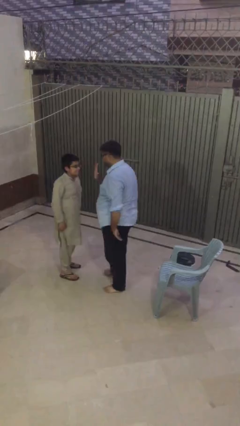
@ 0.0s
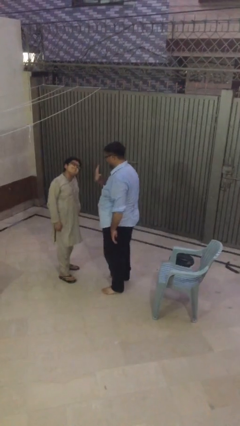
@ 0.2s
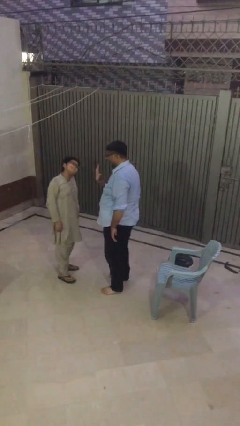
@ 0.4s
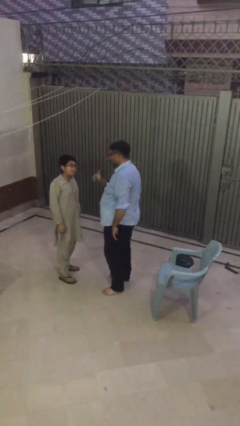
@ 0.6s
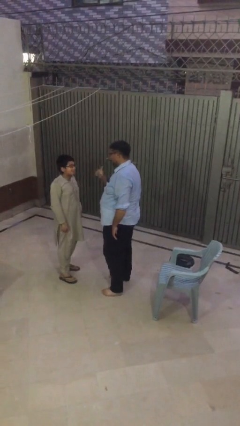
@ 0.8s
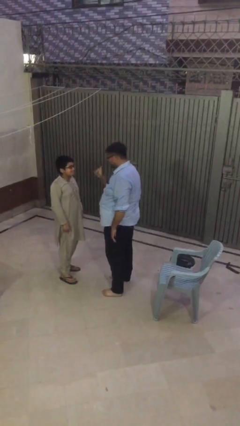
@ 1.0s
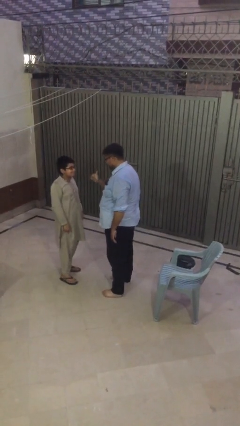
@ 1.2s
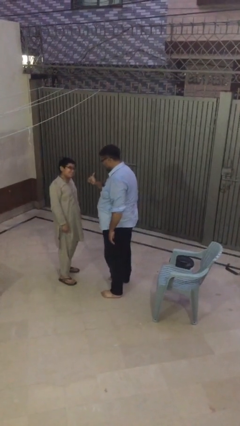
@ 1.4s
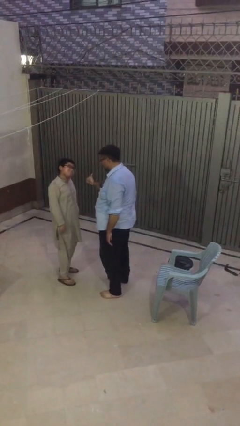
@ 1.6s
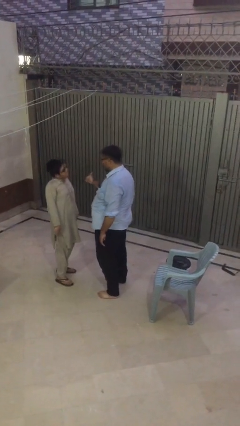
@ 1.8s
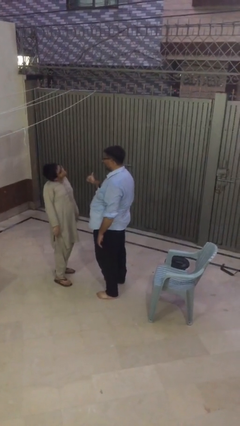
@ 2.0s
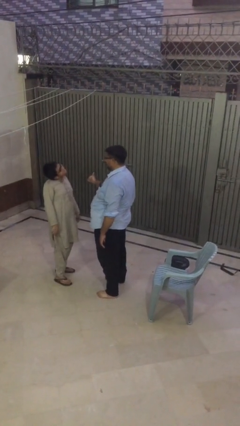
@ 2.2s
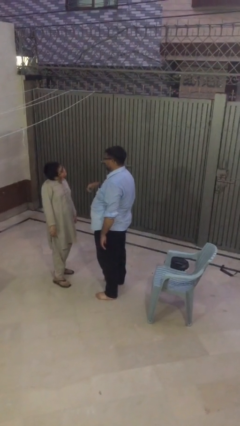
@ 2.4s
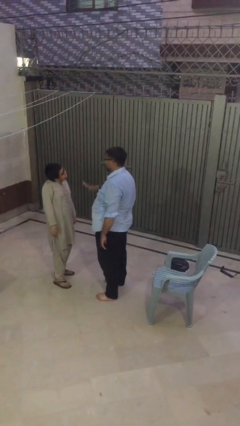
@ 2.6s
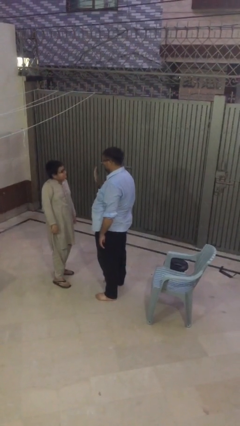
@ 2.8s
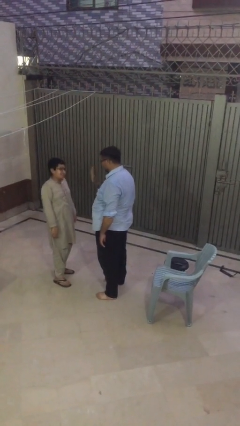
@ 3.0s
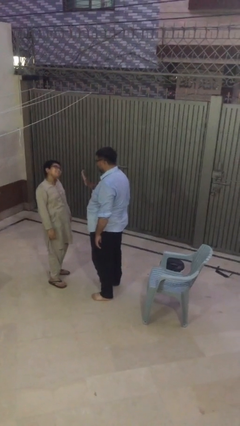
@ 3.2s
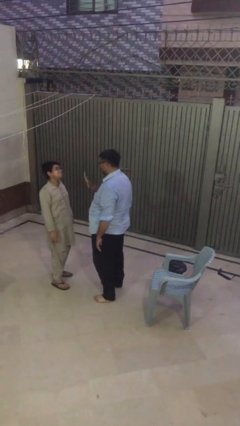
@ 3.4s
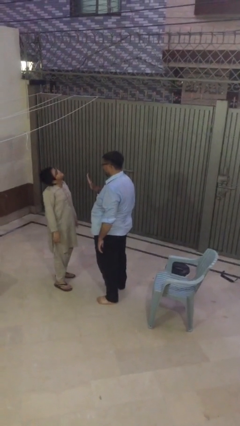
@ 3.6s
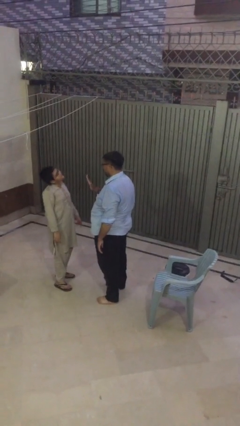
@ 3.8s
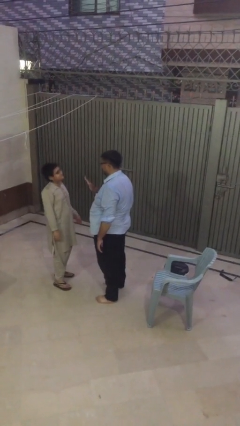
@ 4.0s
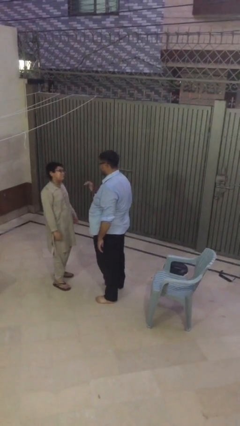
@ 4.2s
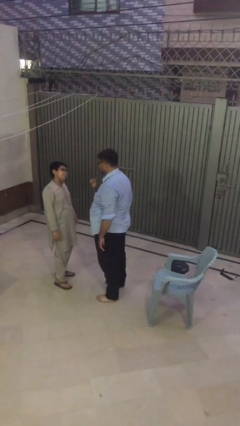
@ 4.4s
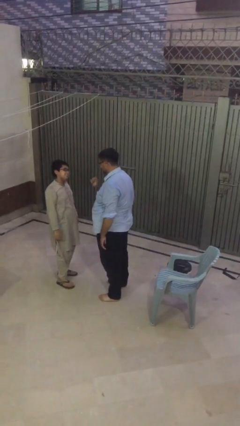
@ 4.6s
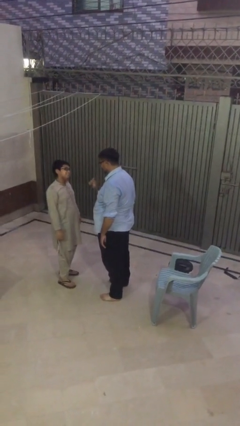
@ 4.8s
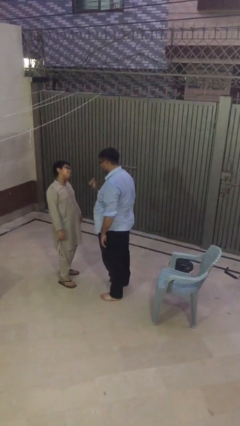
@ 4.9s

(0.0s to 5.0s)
person talks to person

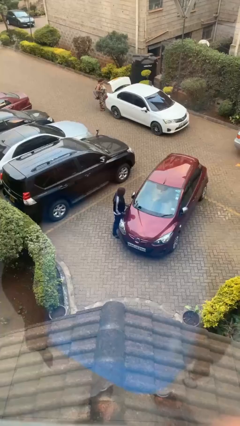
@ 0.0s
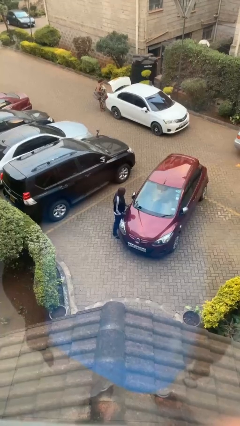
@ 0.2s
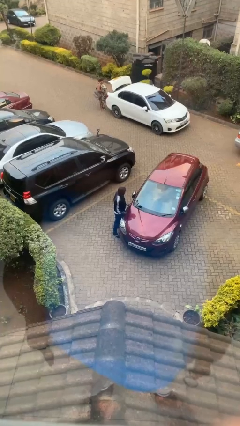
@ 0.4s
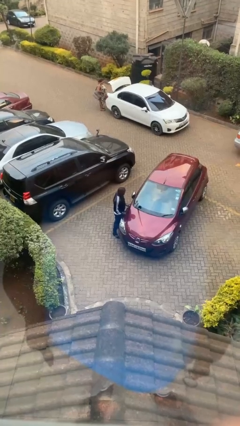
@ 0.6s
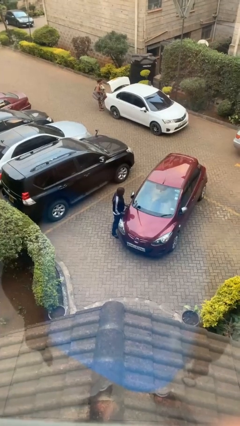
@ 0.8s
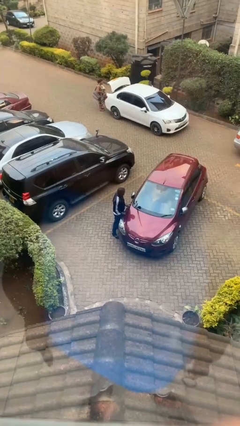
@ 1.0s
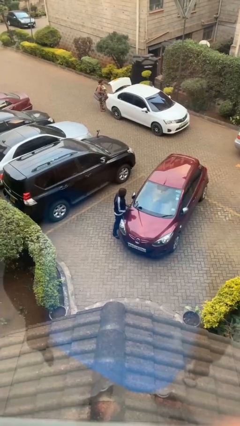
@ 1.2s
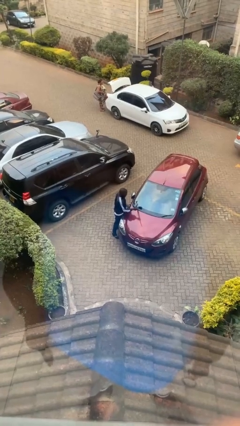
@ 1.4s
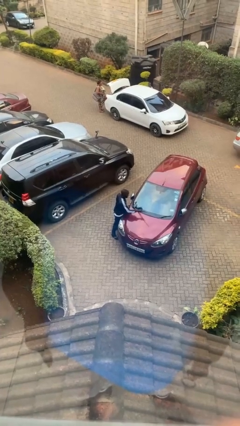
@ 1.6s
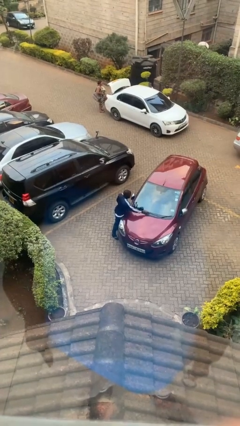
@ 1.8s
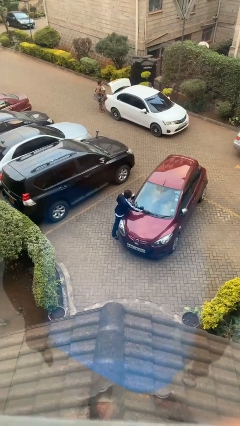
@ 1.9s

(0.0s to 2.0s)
person flips down car wipers

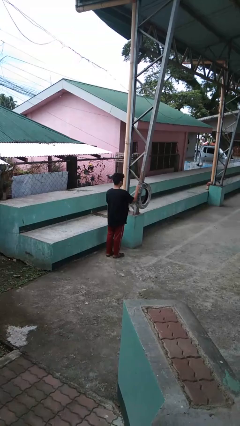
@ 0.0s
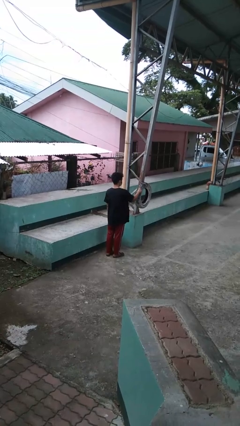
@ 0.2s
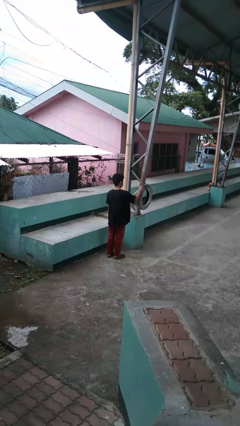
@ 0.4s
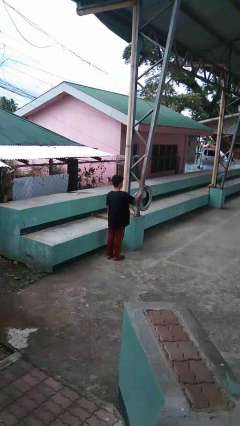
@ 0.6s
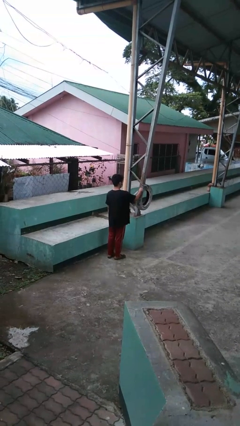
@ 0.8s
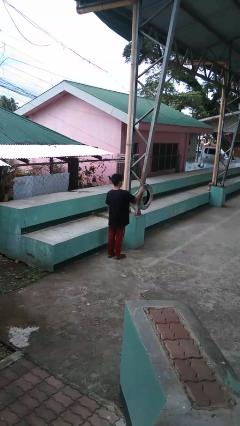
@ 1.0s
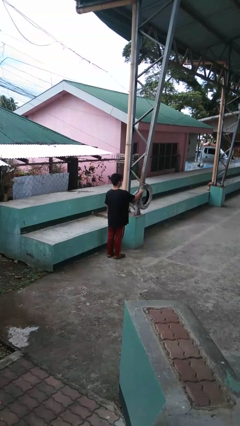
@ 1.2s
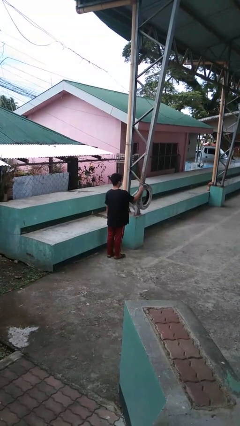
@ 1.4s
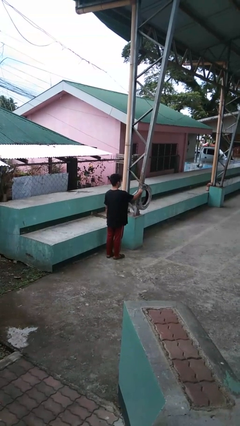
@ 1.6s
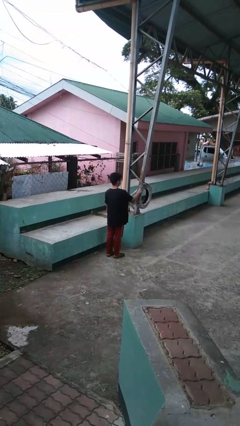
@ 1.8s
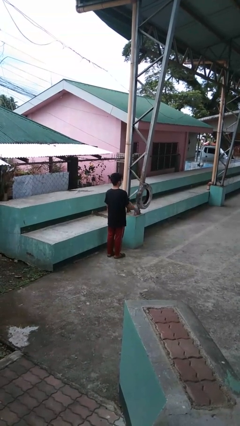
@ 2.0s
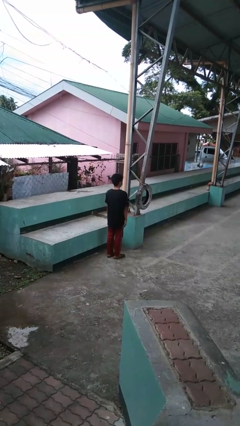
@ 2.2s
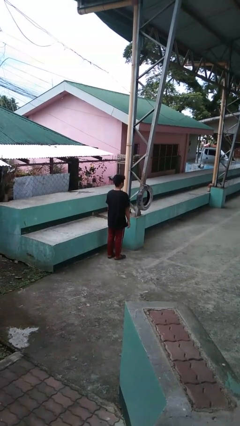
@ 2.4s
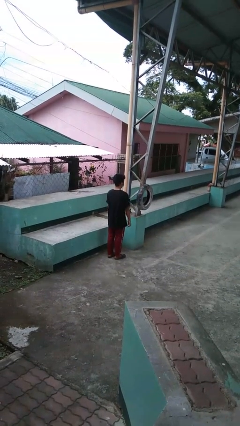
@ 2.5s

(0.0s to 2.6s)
person taps object with finger

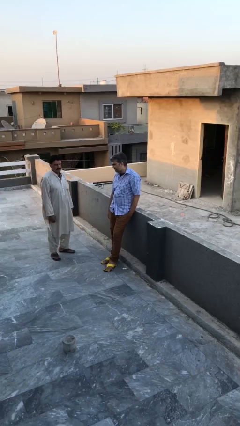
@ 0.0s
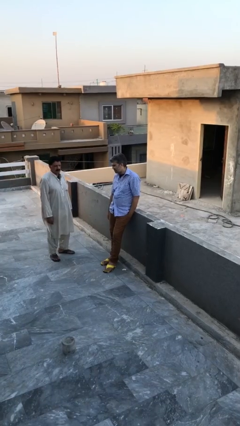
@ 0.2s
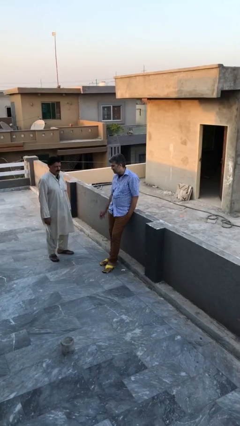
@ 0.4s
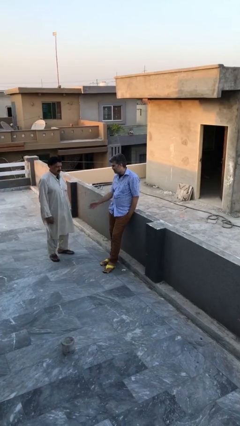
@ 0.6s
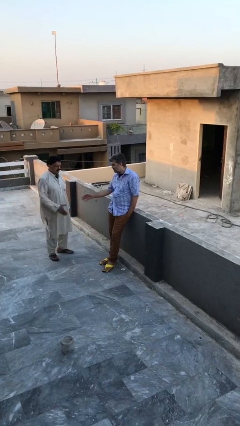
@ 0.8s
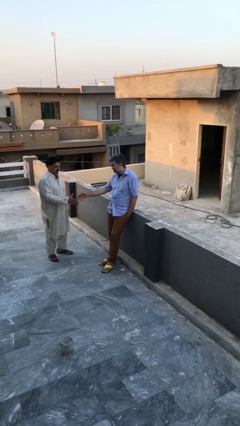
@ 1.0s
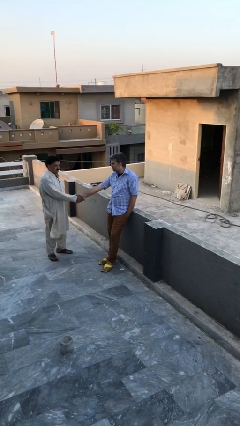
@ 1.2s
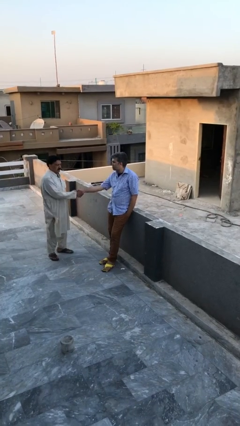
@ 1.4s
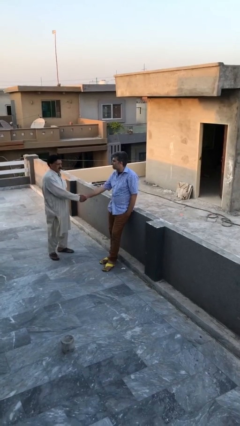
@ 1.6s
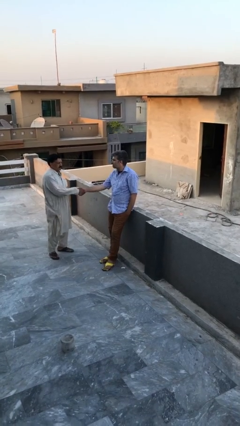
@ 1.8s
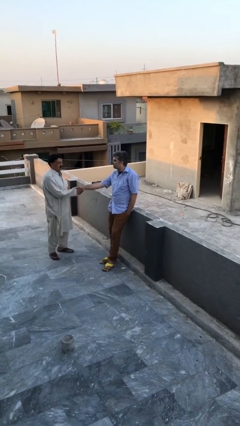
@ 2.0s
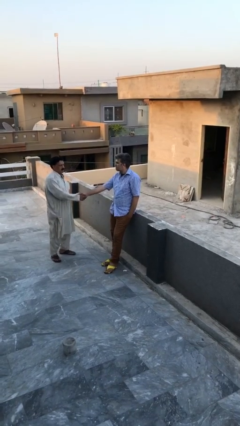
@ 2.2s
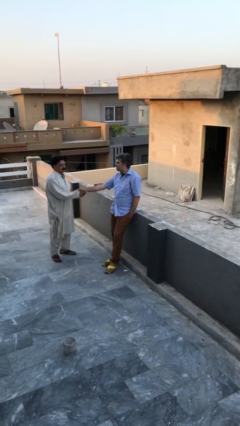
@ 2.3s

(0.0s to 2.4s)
person shakes hand

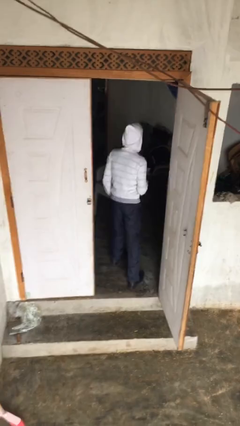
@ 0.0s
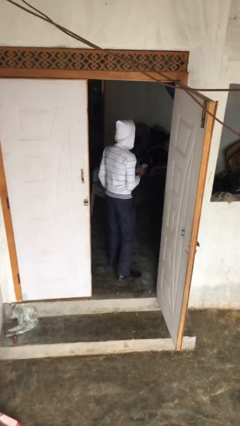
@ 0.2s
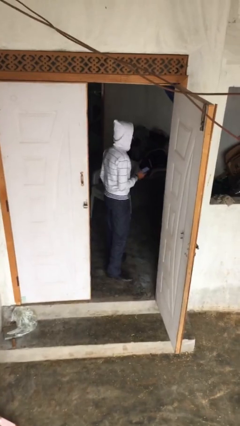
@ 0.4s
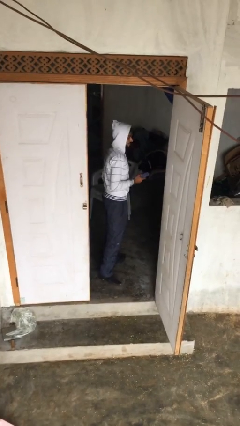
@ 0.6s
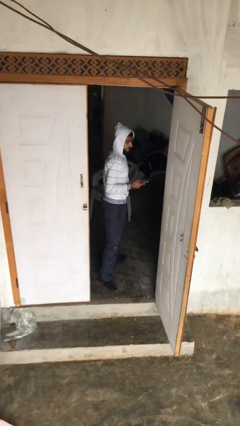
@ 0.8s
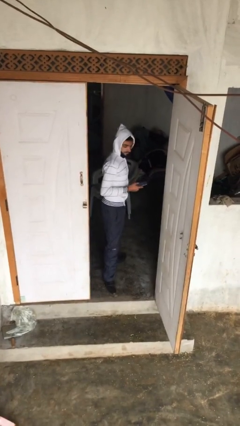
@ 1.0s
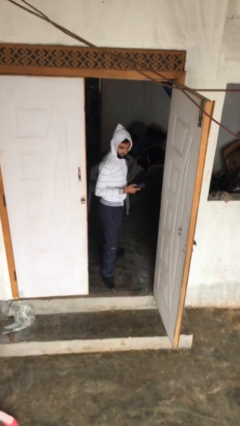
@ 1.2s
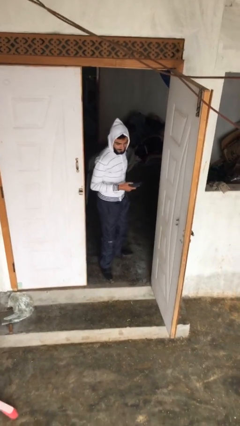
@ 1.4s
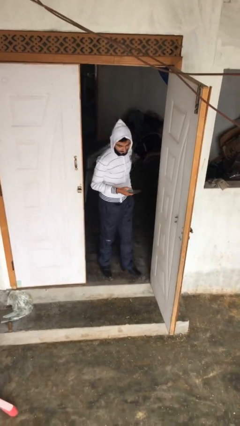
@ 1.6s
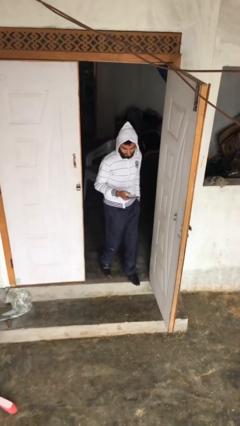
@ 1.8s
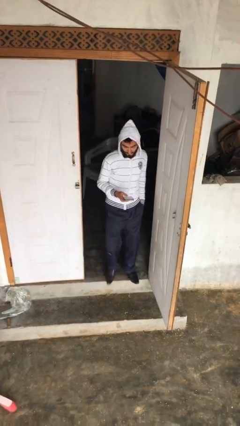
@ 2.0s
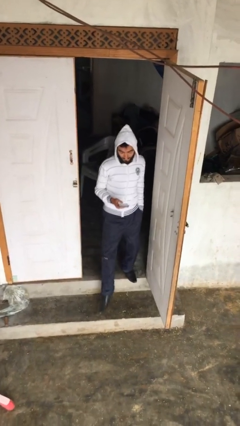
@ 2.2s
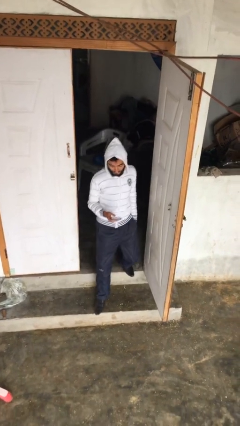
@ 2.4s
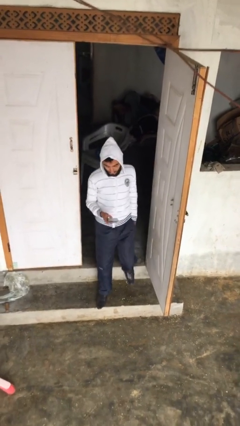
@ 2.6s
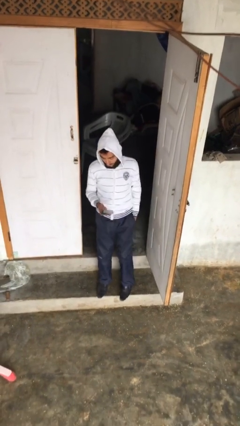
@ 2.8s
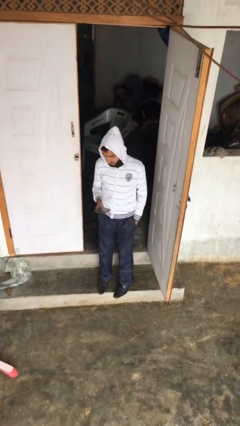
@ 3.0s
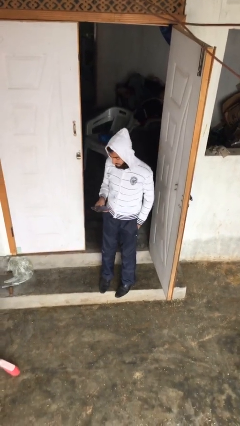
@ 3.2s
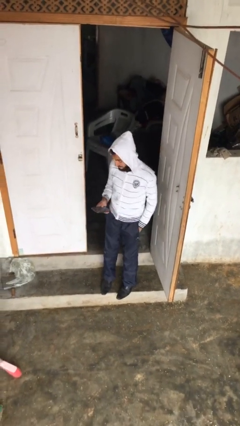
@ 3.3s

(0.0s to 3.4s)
person enters scene through structure

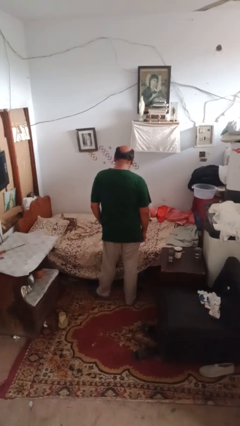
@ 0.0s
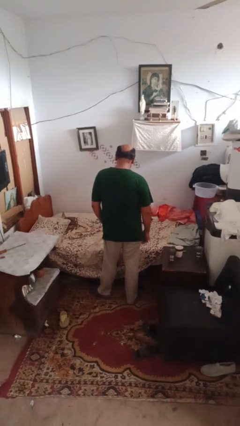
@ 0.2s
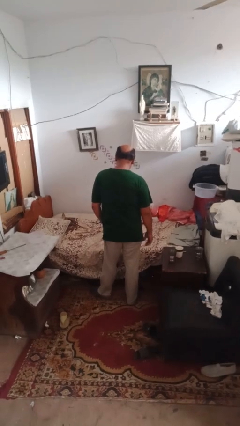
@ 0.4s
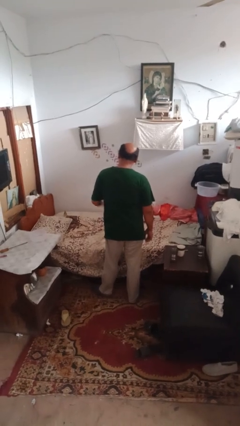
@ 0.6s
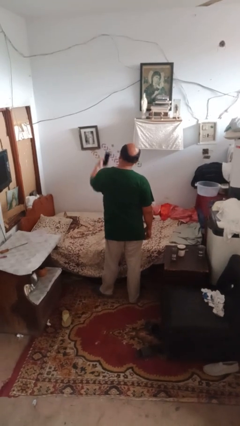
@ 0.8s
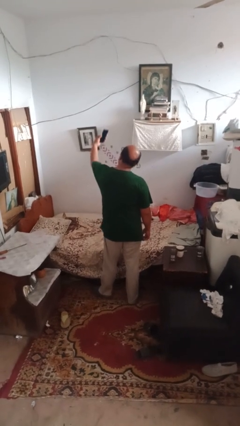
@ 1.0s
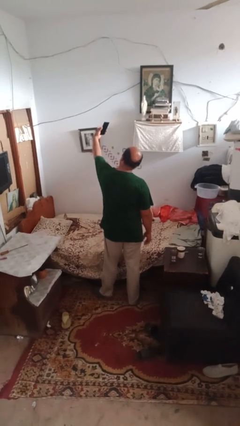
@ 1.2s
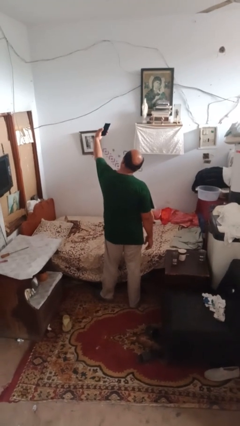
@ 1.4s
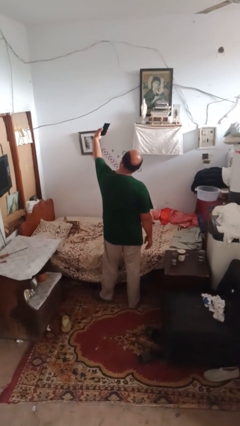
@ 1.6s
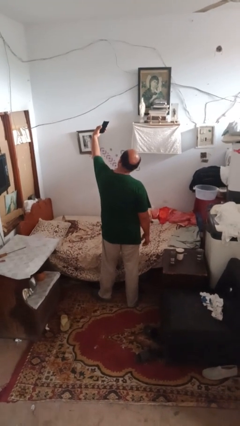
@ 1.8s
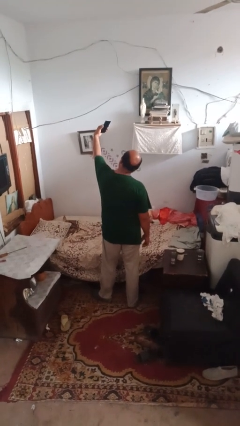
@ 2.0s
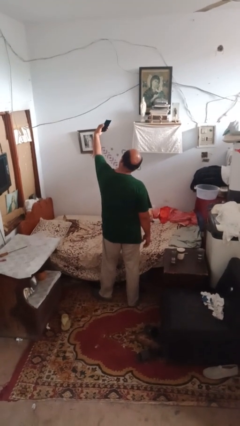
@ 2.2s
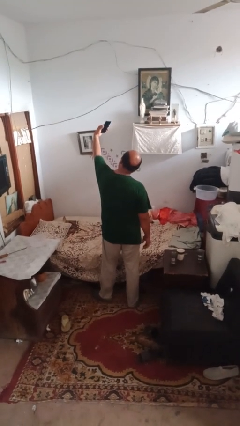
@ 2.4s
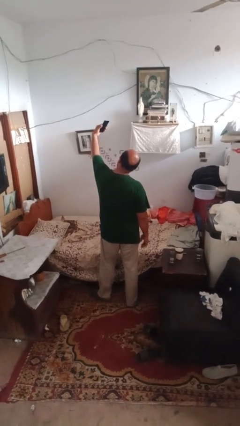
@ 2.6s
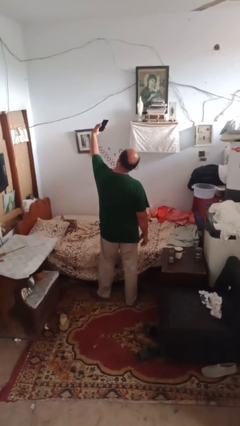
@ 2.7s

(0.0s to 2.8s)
person takes selfie
